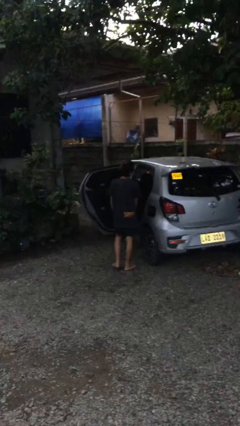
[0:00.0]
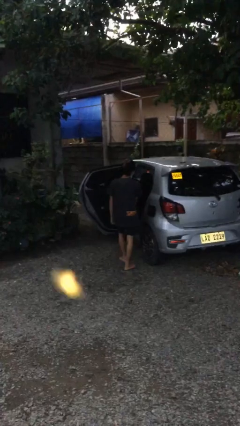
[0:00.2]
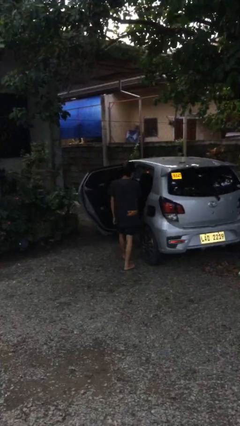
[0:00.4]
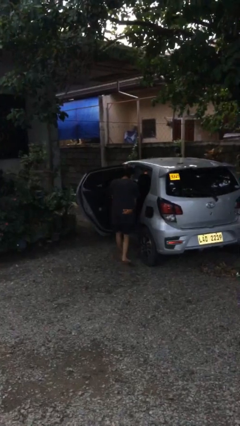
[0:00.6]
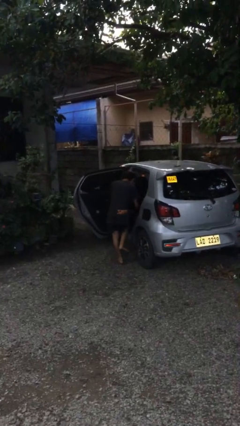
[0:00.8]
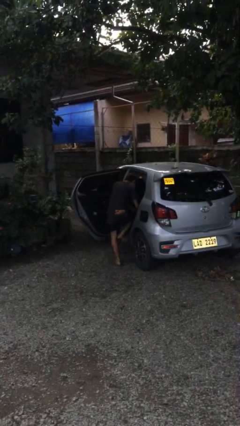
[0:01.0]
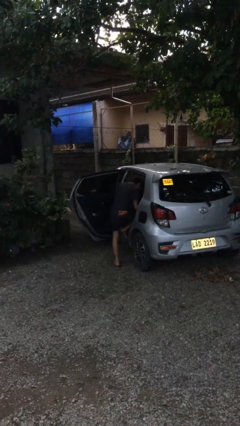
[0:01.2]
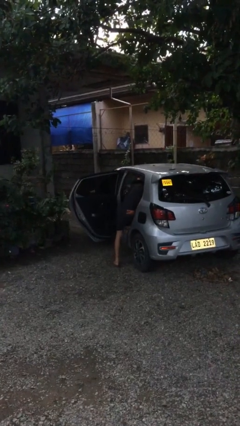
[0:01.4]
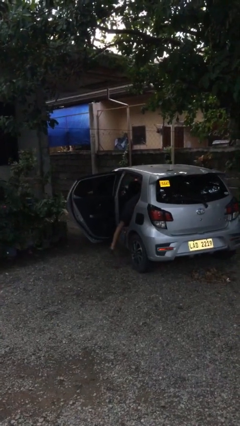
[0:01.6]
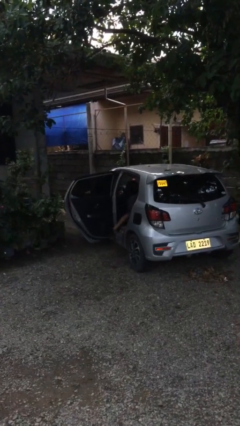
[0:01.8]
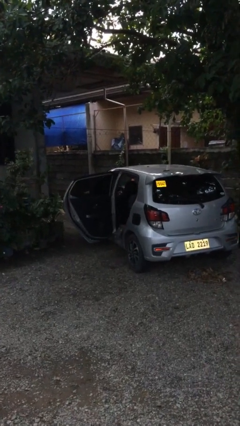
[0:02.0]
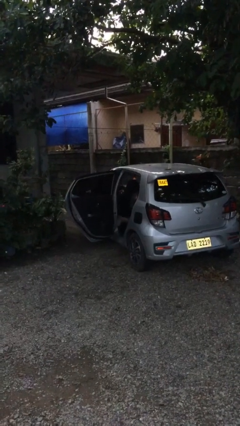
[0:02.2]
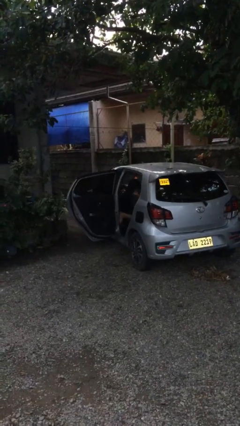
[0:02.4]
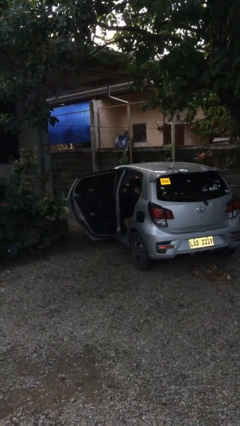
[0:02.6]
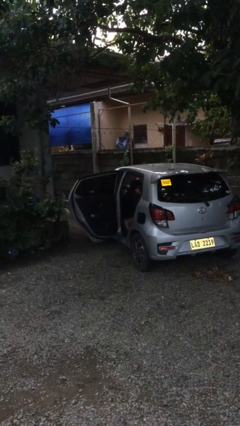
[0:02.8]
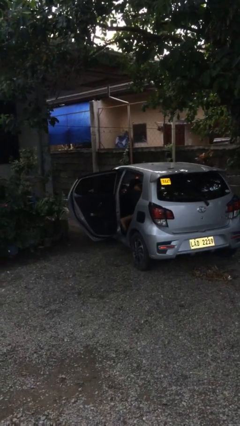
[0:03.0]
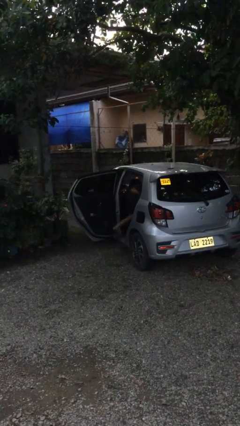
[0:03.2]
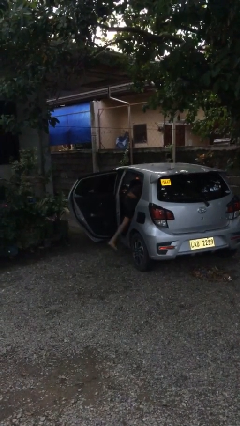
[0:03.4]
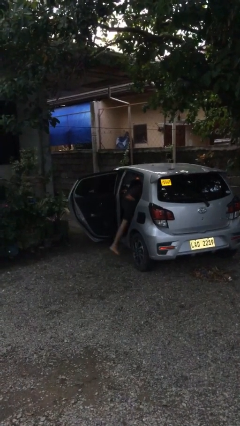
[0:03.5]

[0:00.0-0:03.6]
person enters car

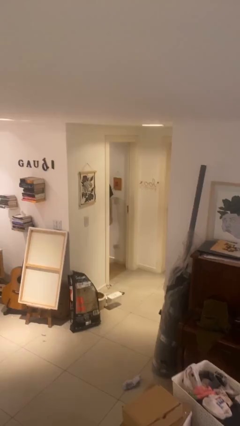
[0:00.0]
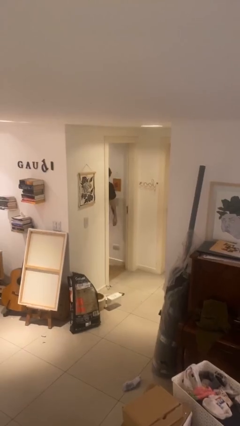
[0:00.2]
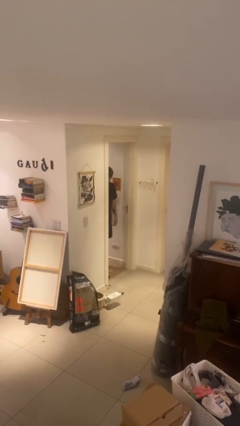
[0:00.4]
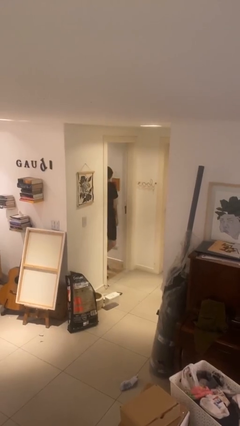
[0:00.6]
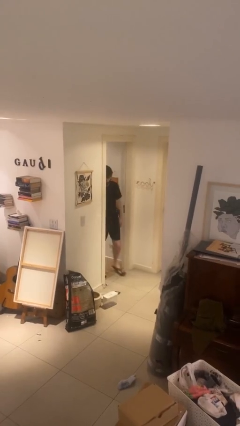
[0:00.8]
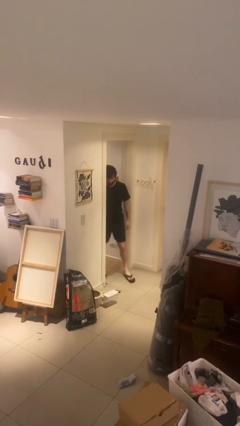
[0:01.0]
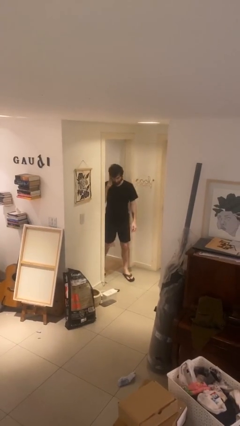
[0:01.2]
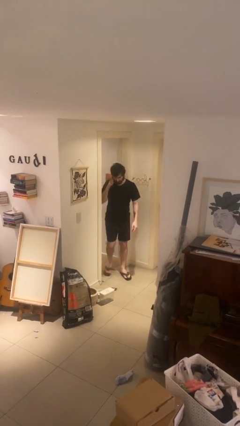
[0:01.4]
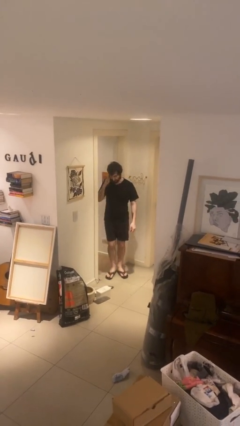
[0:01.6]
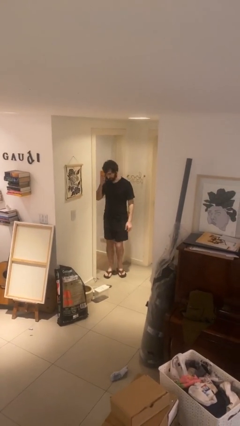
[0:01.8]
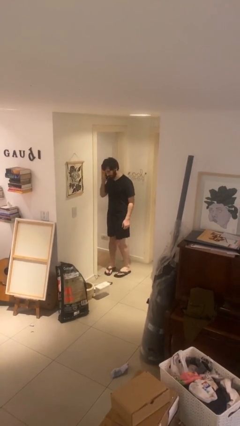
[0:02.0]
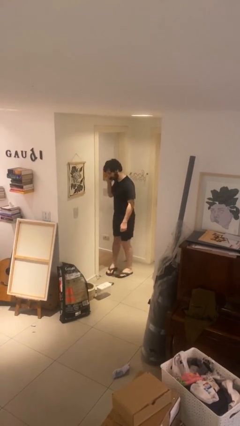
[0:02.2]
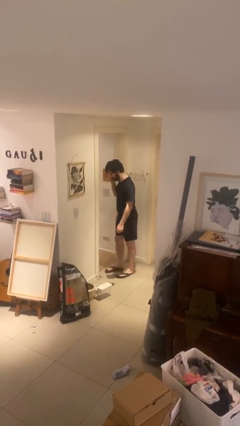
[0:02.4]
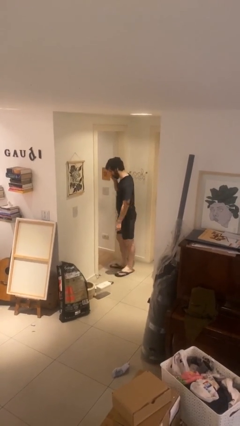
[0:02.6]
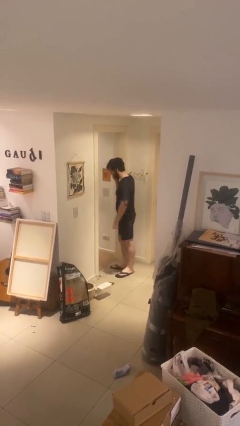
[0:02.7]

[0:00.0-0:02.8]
person enters scene through structure

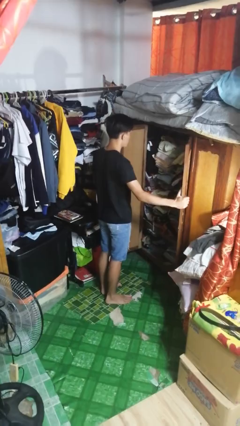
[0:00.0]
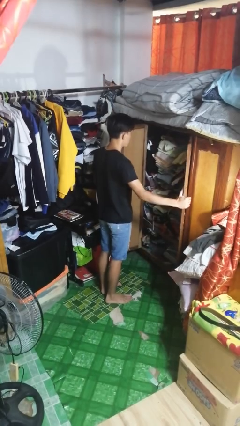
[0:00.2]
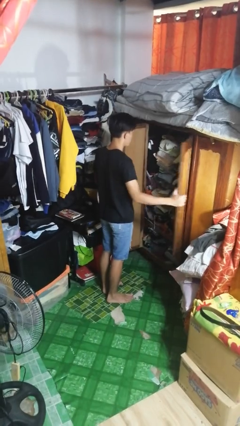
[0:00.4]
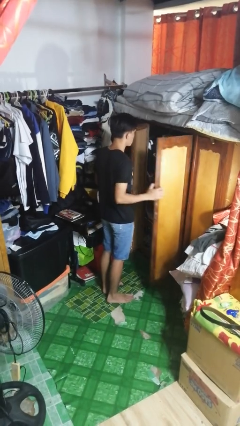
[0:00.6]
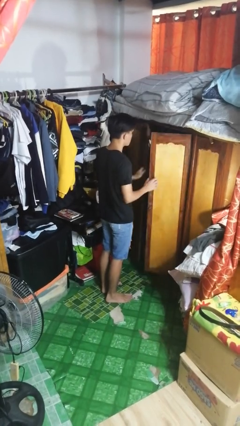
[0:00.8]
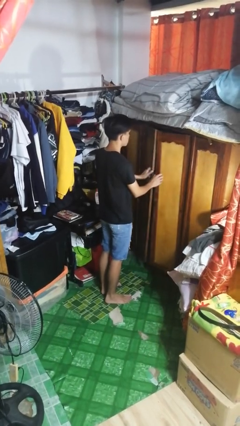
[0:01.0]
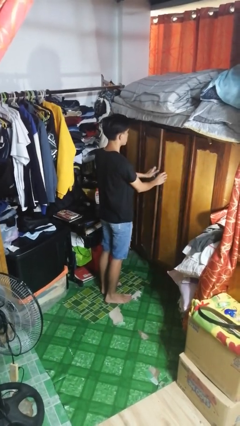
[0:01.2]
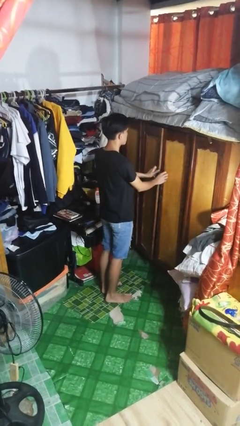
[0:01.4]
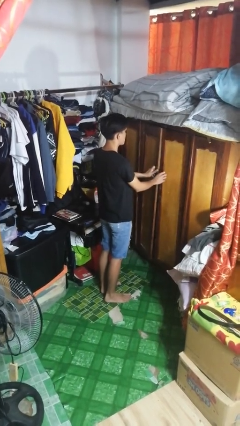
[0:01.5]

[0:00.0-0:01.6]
person closes closet door

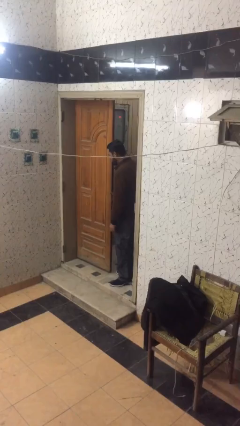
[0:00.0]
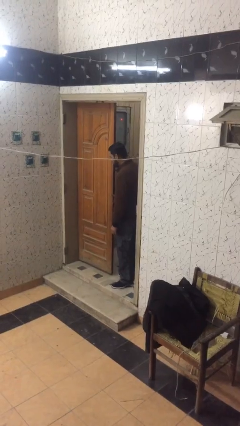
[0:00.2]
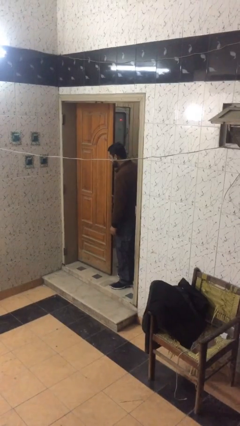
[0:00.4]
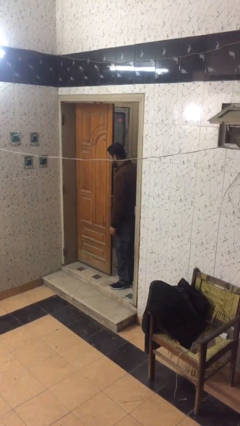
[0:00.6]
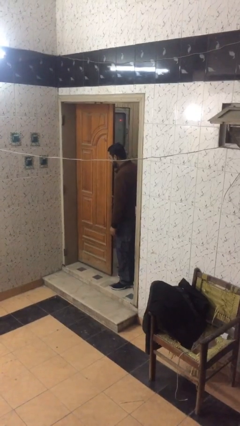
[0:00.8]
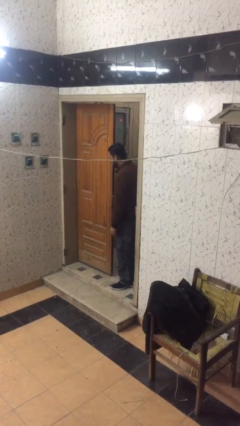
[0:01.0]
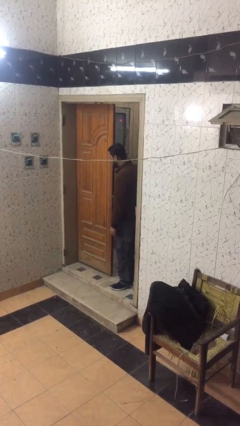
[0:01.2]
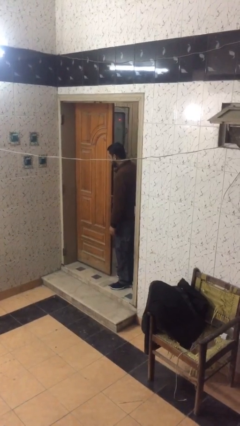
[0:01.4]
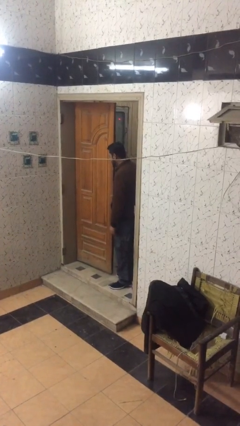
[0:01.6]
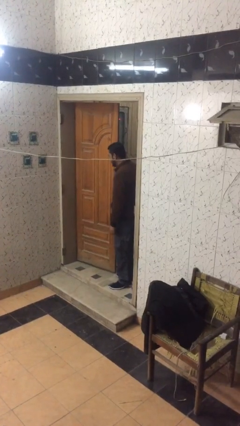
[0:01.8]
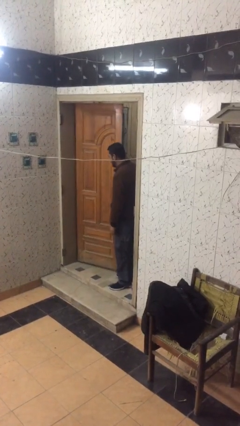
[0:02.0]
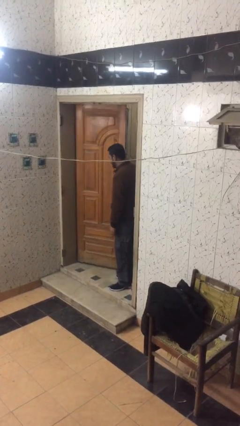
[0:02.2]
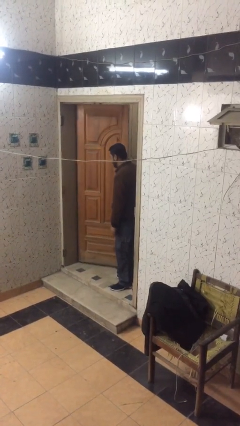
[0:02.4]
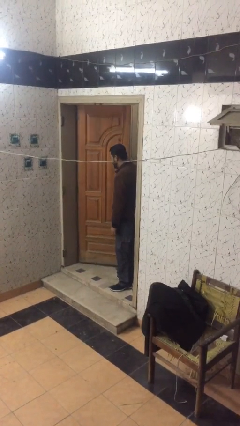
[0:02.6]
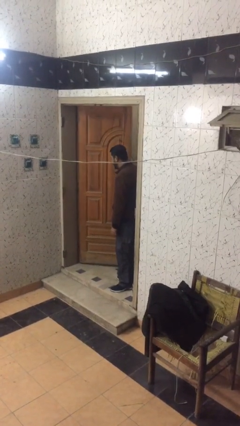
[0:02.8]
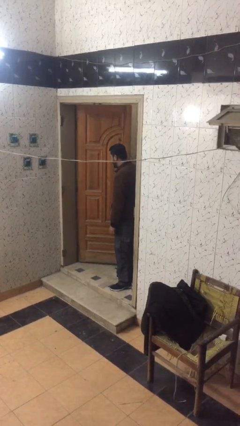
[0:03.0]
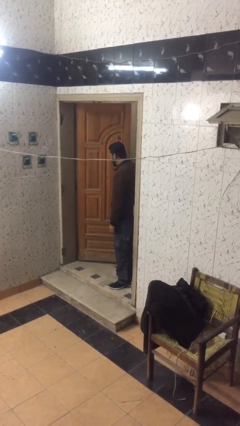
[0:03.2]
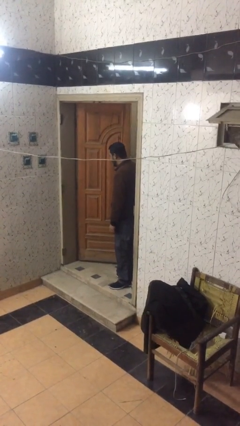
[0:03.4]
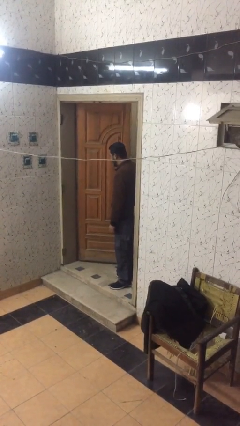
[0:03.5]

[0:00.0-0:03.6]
person opens facility door

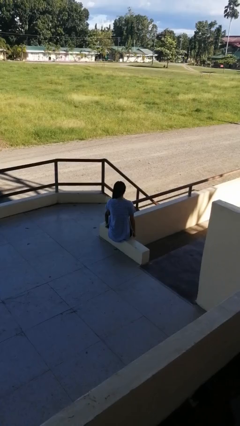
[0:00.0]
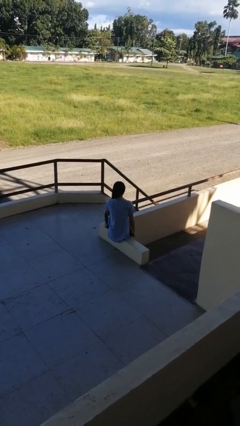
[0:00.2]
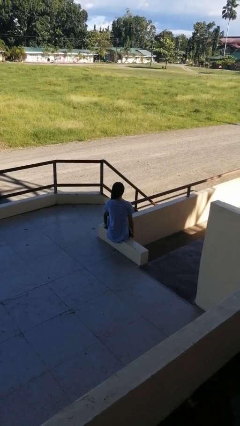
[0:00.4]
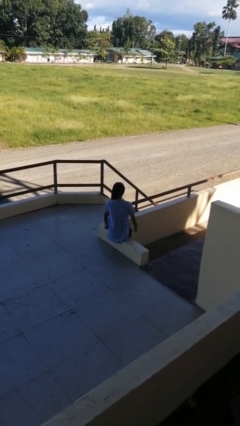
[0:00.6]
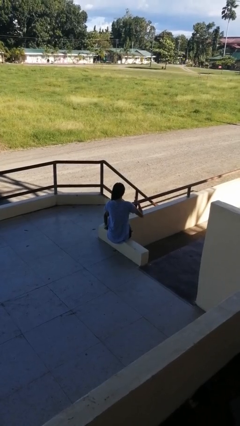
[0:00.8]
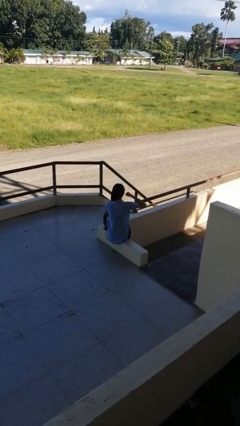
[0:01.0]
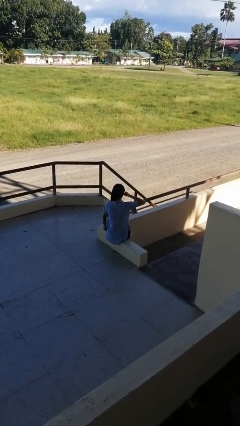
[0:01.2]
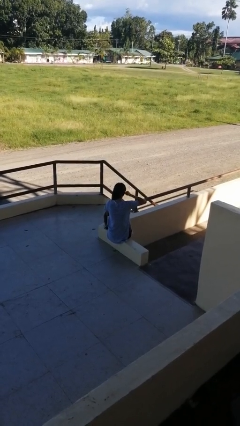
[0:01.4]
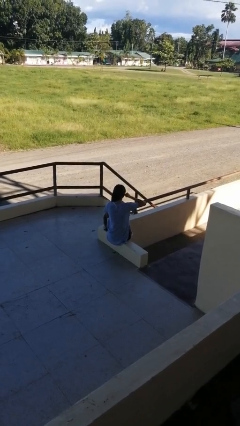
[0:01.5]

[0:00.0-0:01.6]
person gestures call me

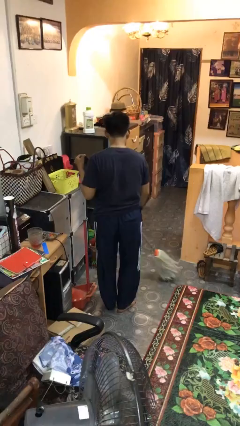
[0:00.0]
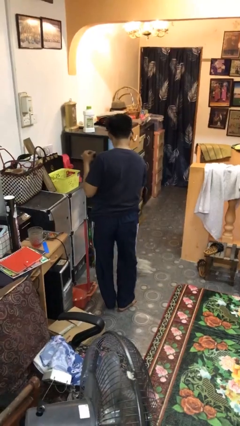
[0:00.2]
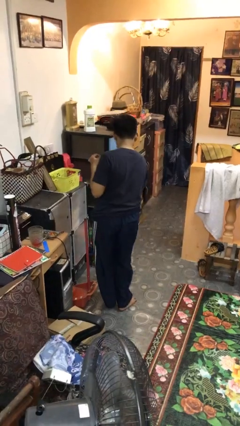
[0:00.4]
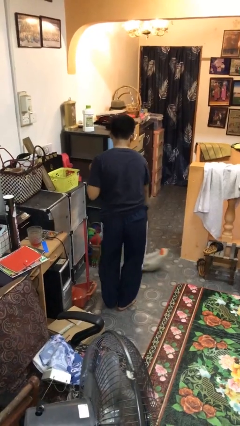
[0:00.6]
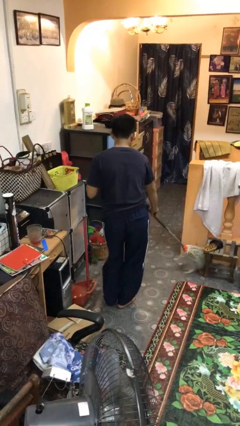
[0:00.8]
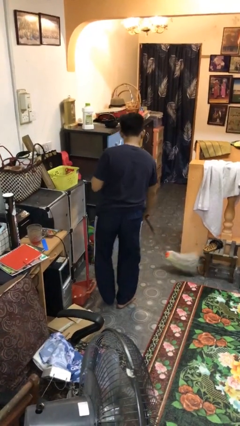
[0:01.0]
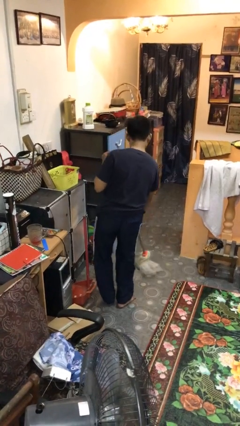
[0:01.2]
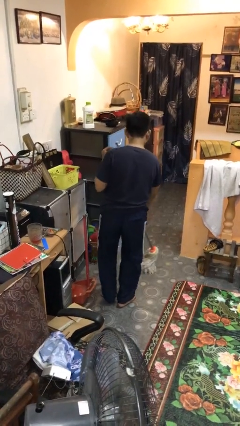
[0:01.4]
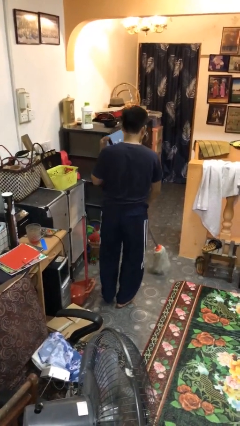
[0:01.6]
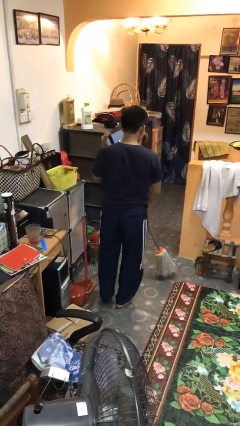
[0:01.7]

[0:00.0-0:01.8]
person mops

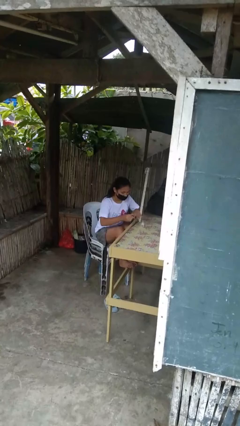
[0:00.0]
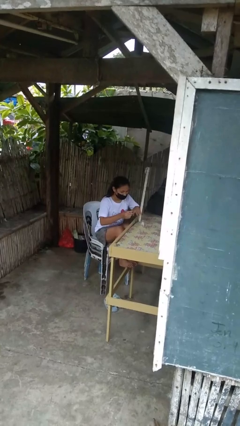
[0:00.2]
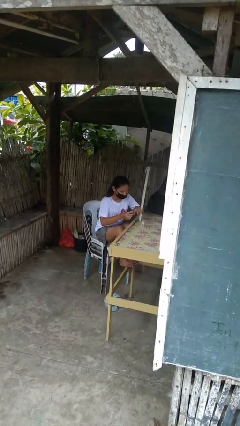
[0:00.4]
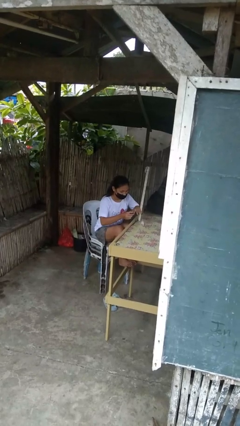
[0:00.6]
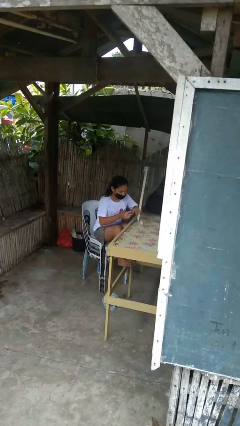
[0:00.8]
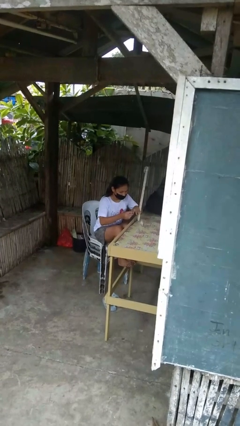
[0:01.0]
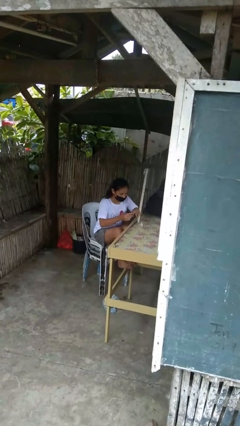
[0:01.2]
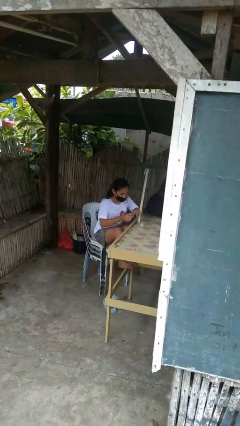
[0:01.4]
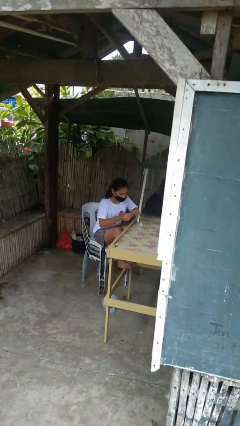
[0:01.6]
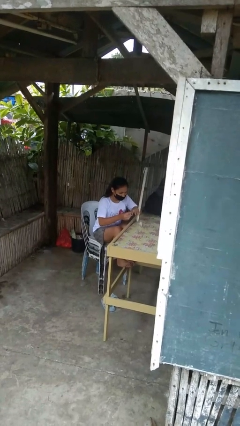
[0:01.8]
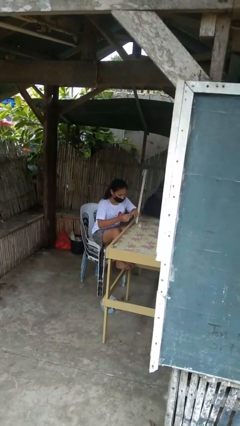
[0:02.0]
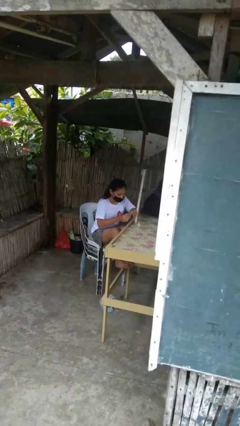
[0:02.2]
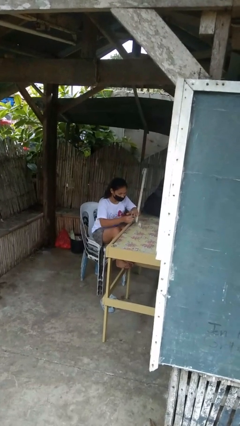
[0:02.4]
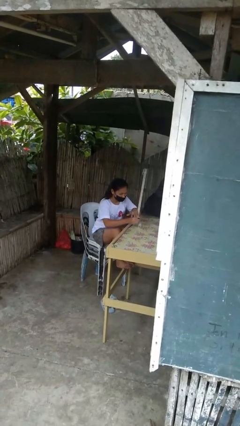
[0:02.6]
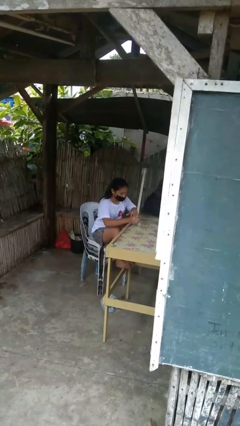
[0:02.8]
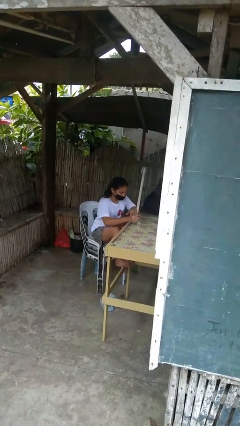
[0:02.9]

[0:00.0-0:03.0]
person paints fingernails
